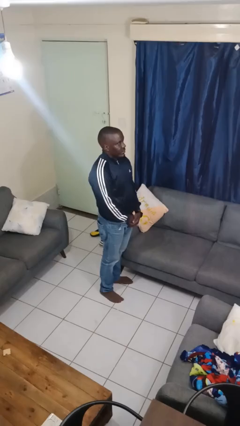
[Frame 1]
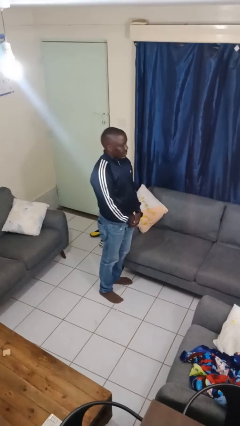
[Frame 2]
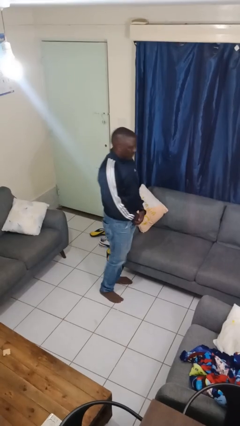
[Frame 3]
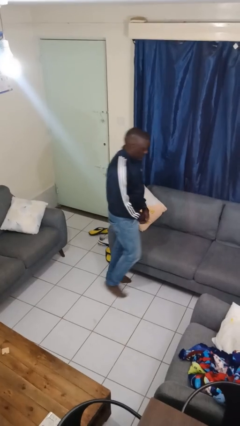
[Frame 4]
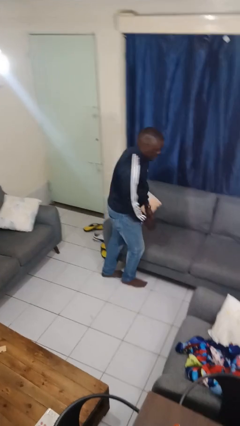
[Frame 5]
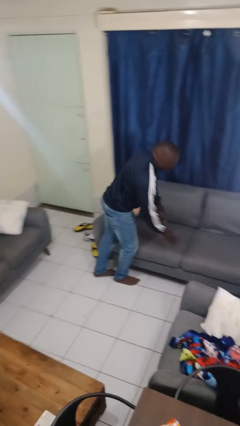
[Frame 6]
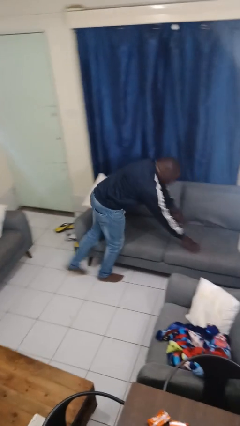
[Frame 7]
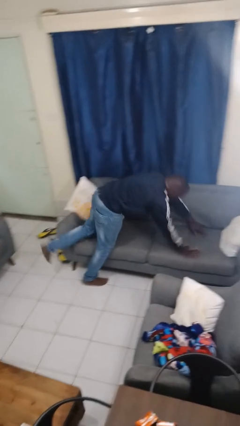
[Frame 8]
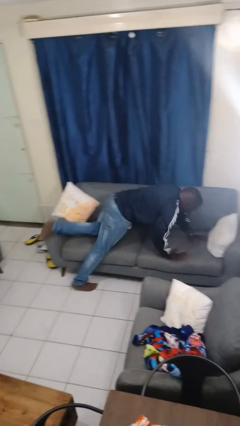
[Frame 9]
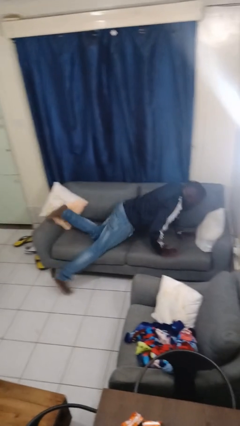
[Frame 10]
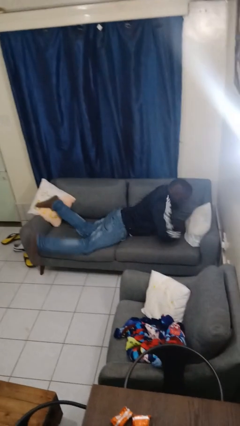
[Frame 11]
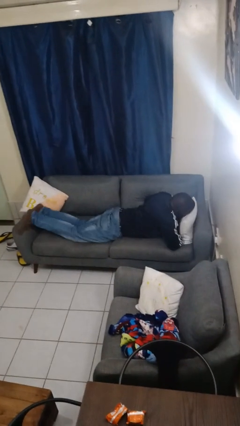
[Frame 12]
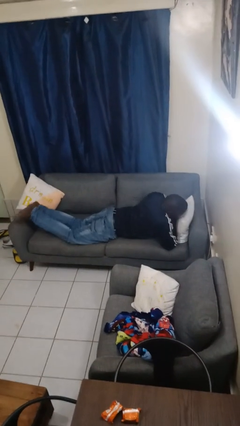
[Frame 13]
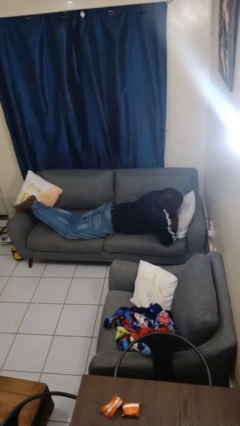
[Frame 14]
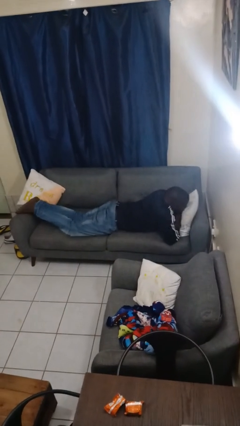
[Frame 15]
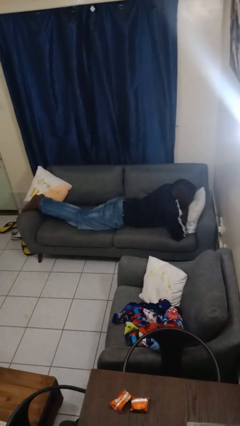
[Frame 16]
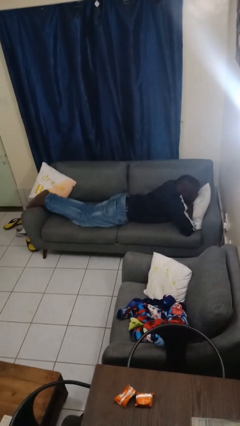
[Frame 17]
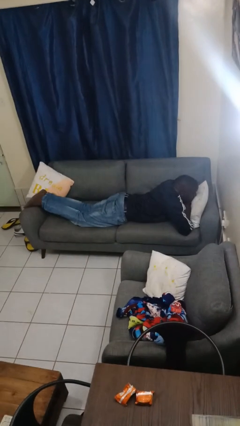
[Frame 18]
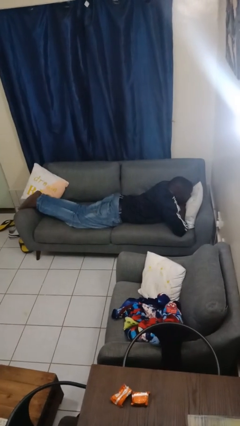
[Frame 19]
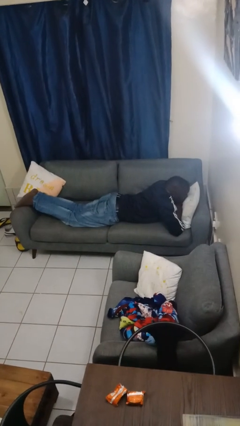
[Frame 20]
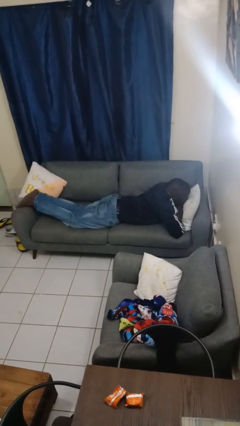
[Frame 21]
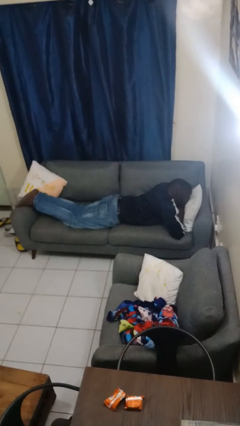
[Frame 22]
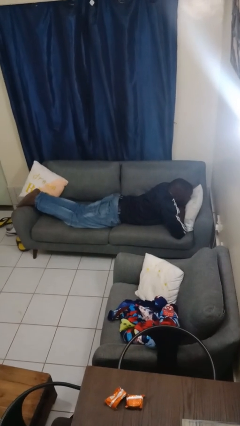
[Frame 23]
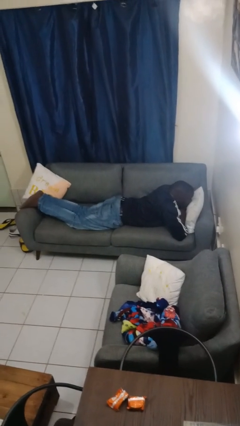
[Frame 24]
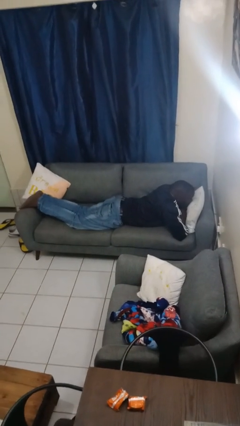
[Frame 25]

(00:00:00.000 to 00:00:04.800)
person lies down on couch

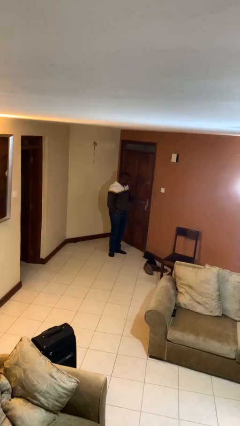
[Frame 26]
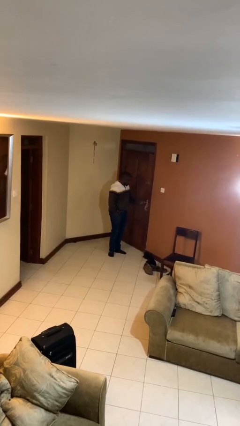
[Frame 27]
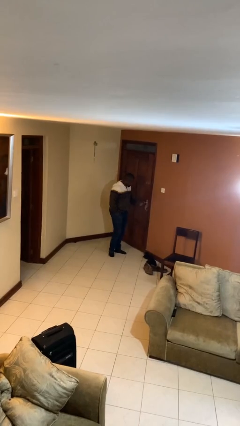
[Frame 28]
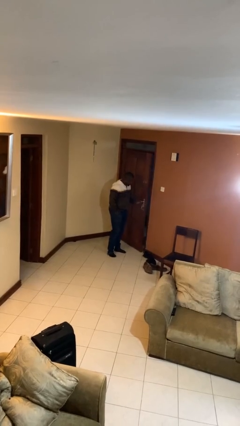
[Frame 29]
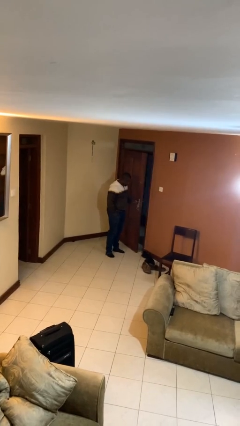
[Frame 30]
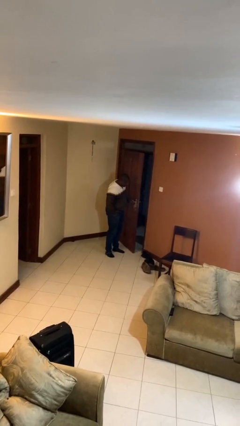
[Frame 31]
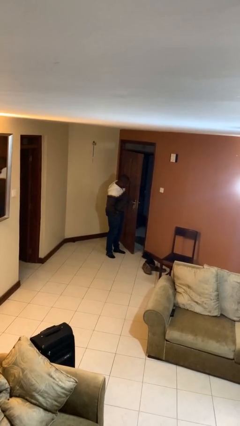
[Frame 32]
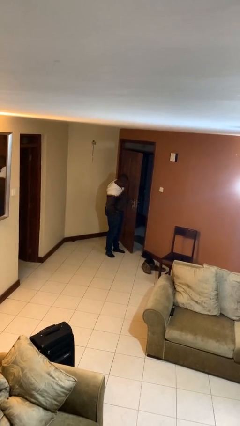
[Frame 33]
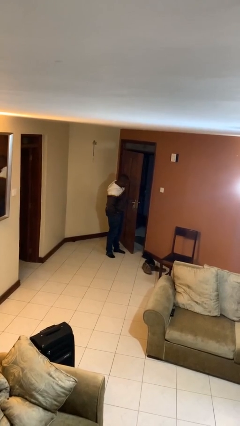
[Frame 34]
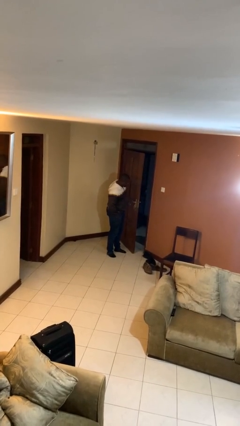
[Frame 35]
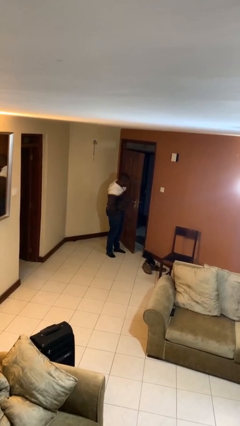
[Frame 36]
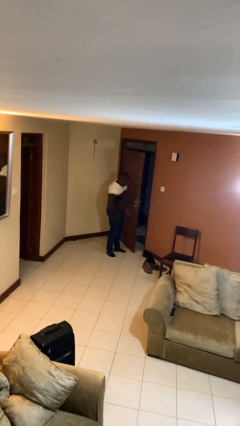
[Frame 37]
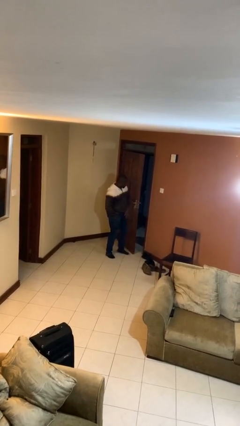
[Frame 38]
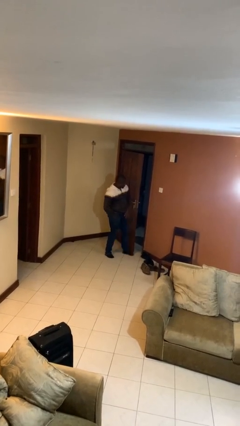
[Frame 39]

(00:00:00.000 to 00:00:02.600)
person opens facility door

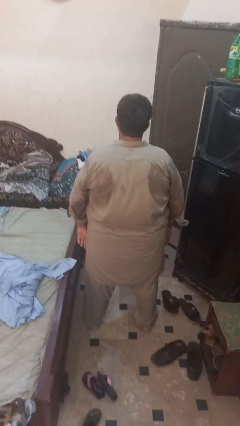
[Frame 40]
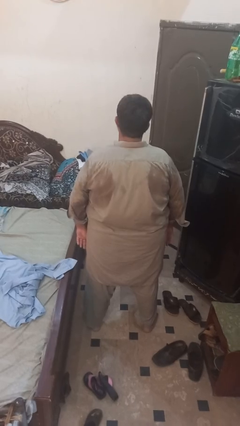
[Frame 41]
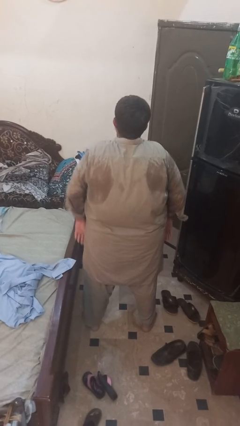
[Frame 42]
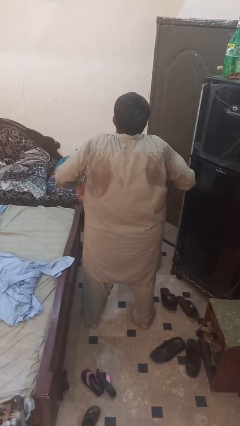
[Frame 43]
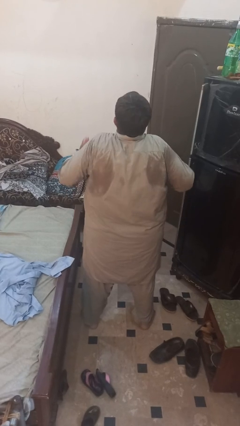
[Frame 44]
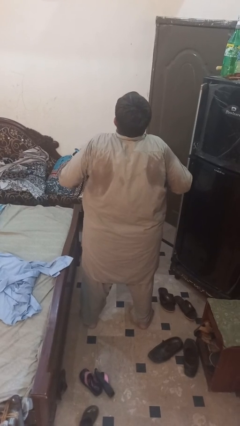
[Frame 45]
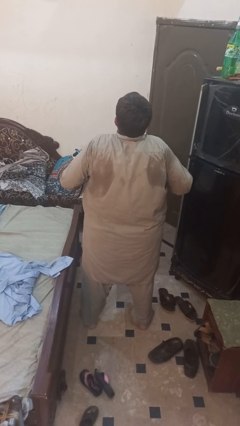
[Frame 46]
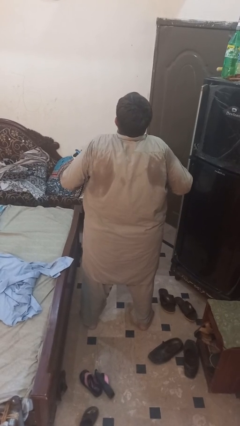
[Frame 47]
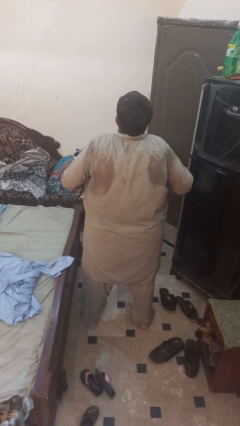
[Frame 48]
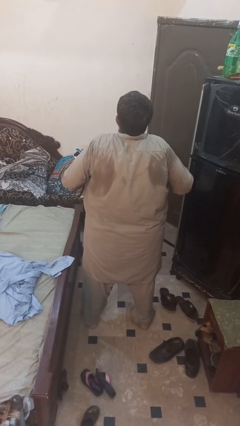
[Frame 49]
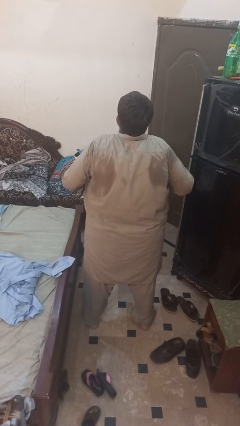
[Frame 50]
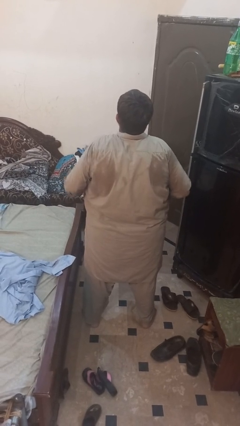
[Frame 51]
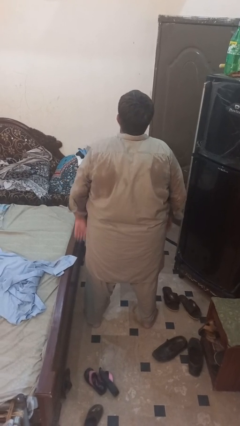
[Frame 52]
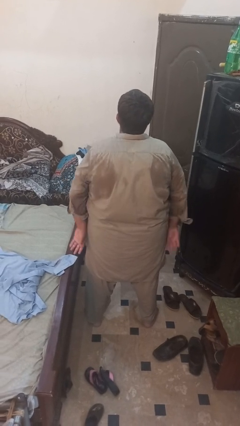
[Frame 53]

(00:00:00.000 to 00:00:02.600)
person shrugs

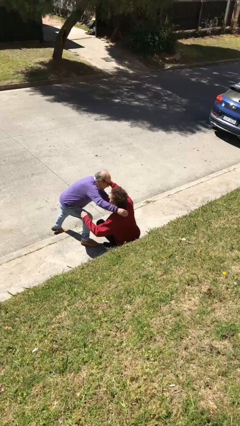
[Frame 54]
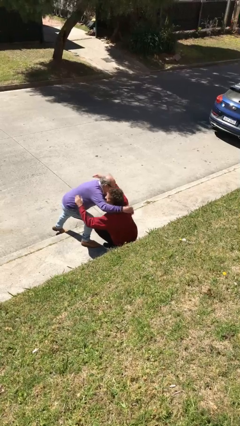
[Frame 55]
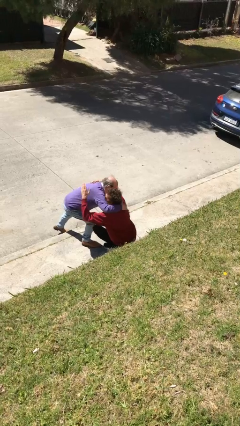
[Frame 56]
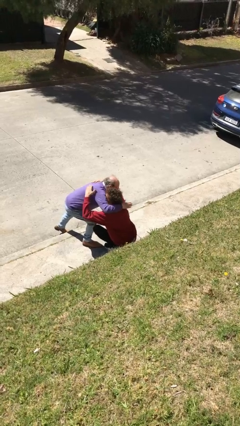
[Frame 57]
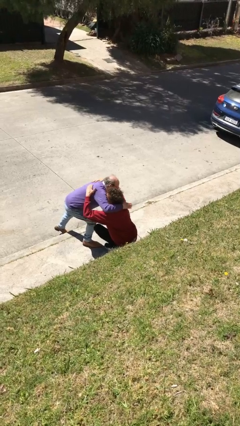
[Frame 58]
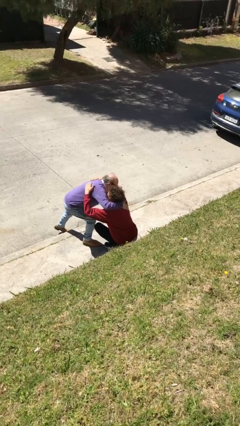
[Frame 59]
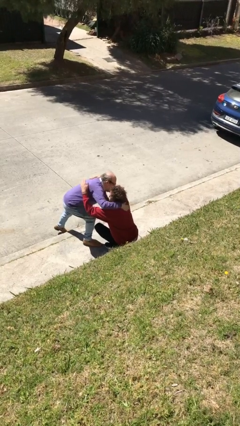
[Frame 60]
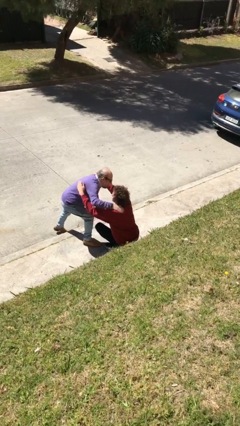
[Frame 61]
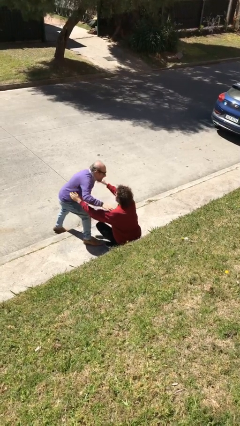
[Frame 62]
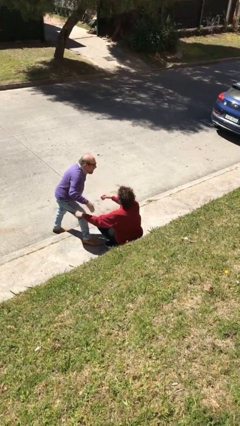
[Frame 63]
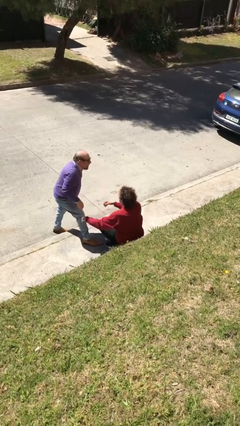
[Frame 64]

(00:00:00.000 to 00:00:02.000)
person embraces person

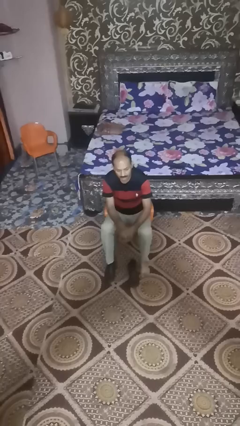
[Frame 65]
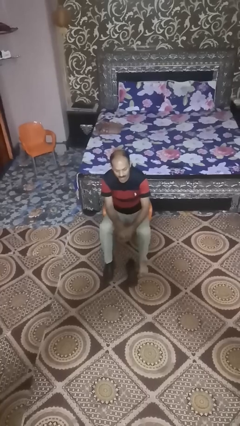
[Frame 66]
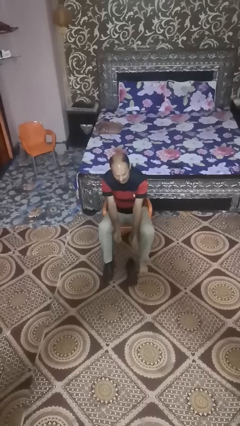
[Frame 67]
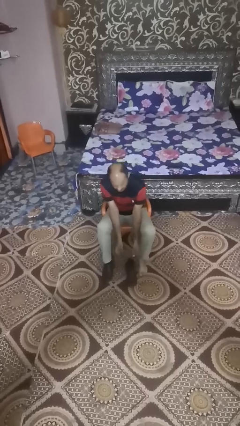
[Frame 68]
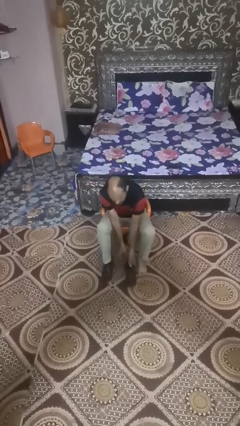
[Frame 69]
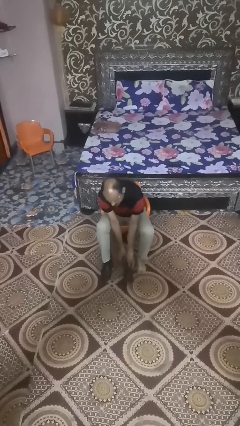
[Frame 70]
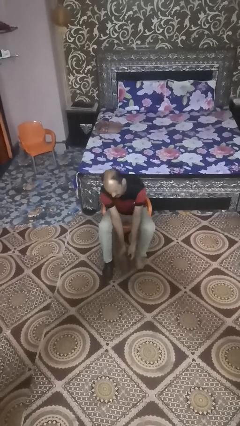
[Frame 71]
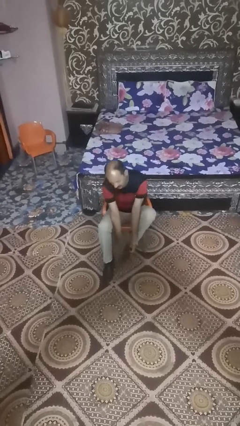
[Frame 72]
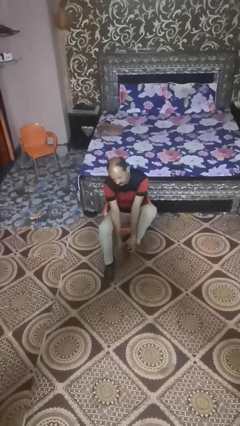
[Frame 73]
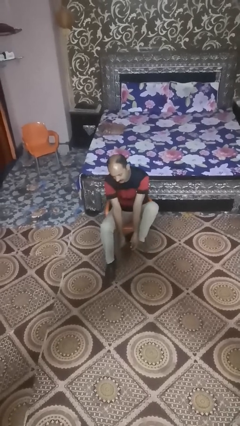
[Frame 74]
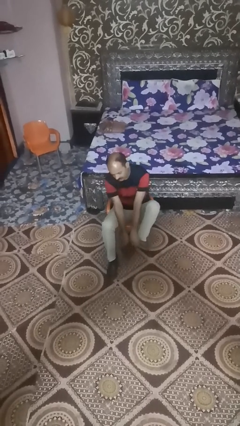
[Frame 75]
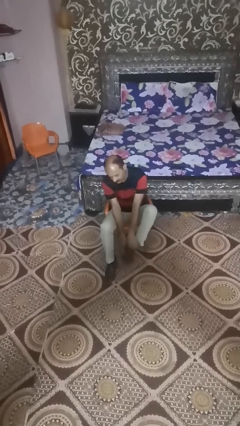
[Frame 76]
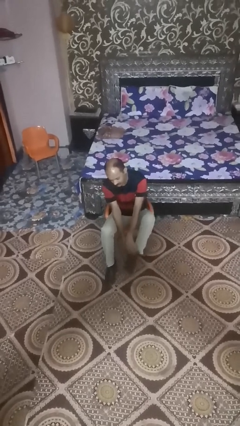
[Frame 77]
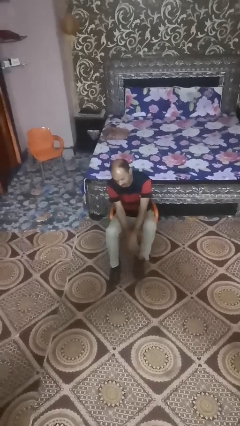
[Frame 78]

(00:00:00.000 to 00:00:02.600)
person puts on boots

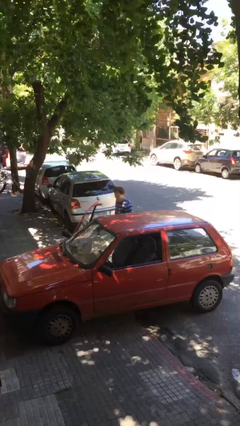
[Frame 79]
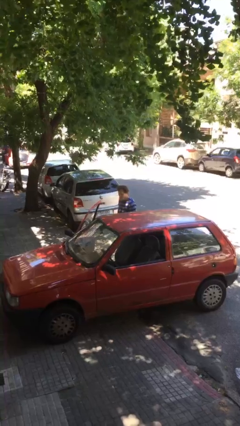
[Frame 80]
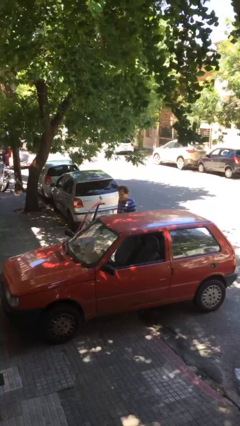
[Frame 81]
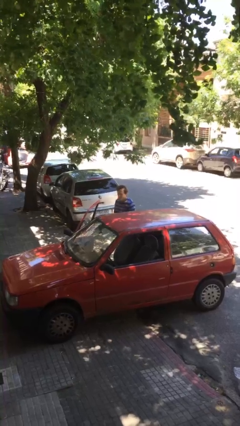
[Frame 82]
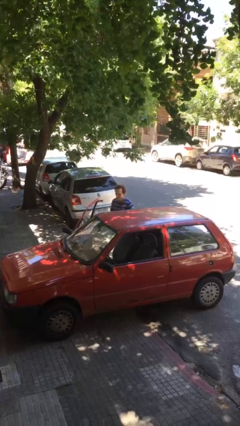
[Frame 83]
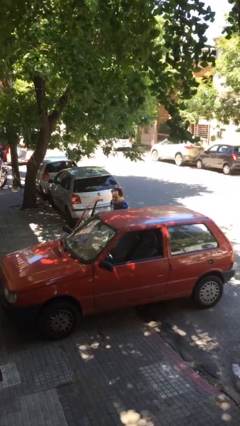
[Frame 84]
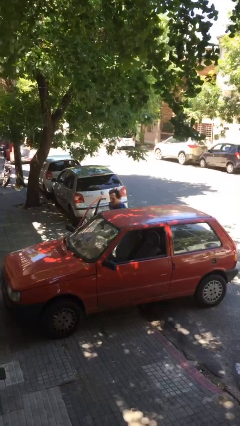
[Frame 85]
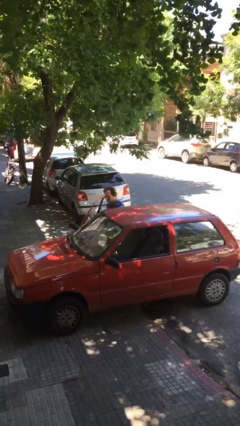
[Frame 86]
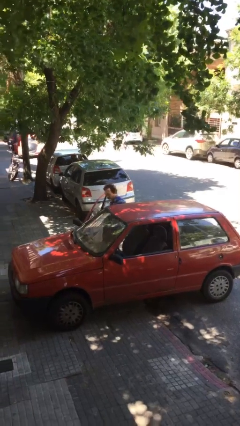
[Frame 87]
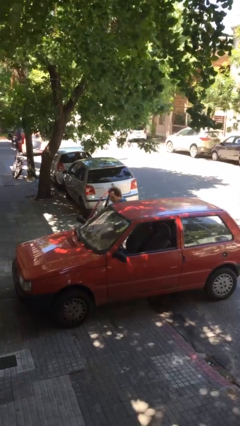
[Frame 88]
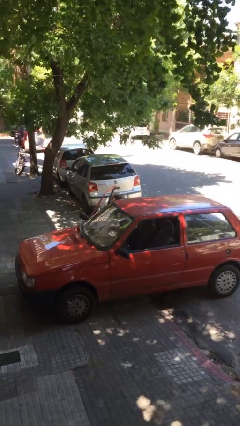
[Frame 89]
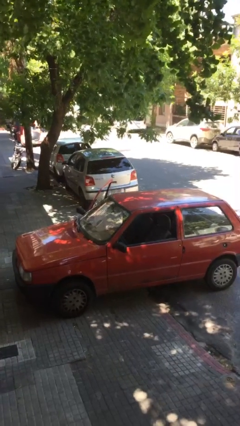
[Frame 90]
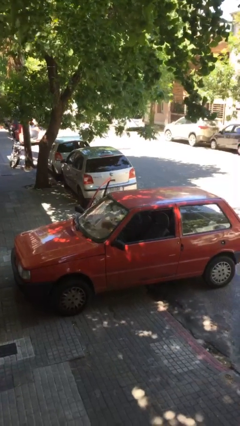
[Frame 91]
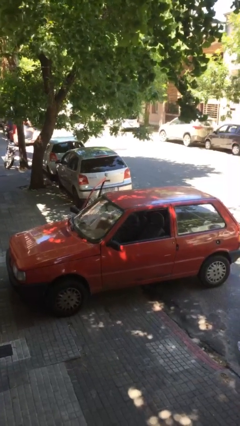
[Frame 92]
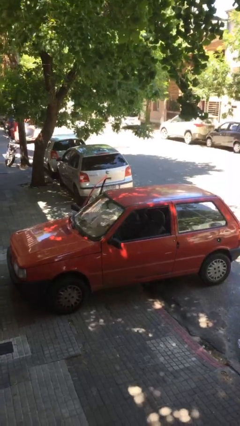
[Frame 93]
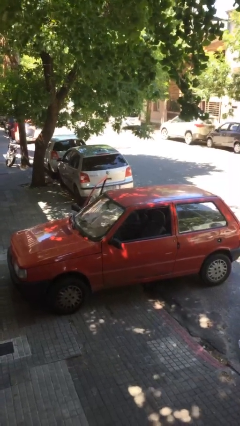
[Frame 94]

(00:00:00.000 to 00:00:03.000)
person enters car
